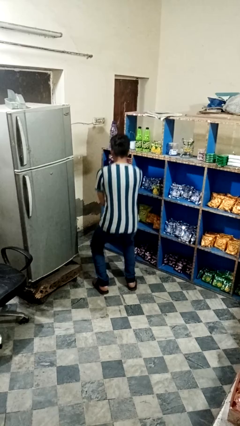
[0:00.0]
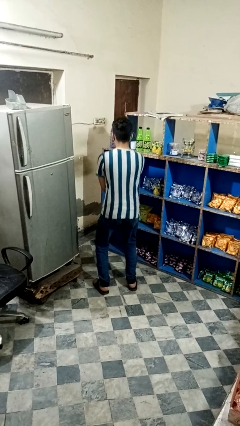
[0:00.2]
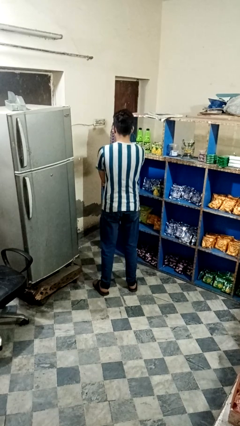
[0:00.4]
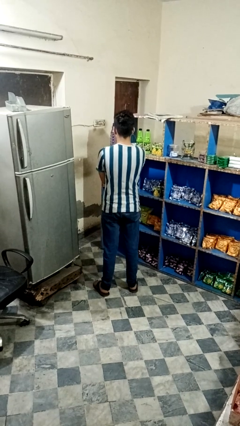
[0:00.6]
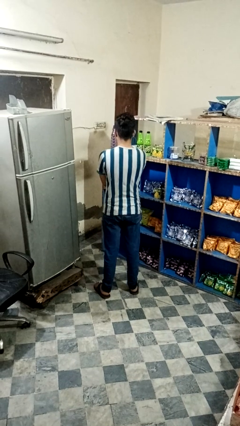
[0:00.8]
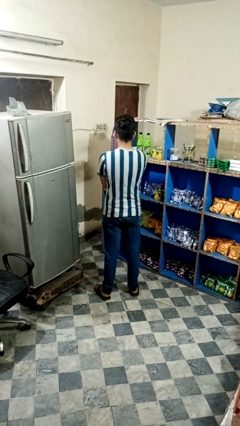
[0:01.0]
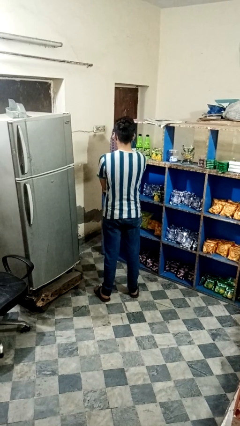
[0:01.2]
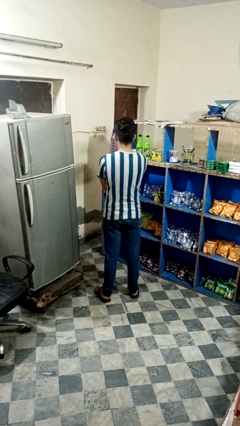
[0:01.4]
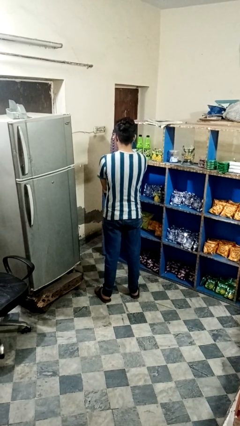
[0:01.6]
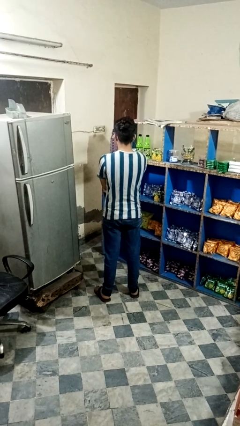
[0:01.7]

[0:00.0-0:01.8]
person stands up

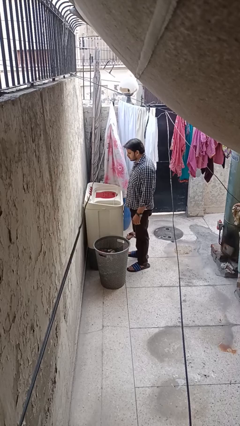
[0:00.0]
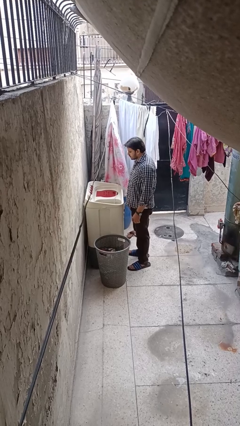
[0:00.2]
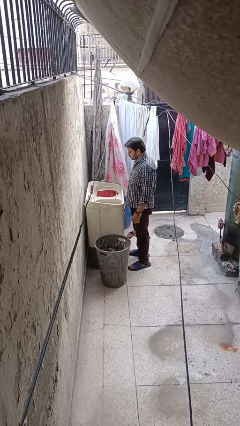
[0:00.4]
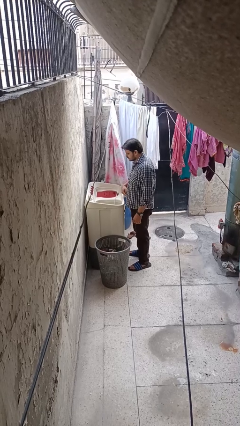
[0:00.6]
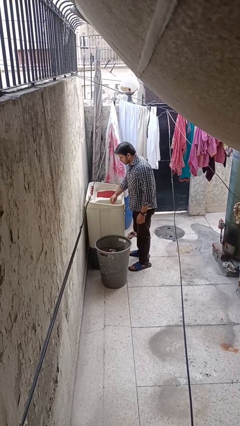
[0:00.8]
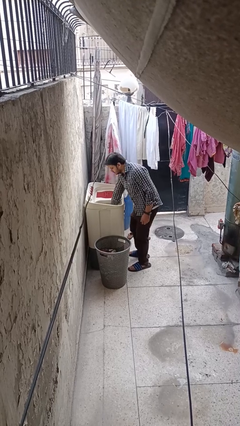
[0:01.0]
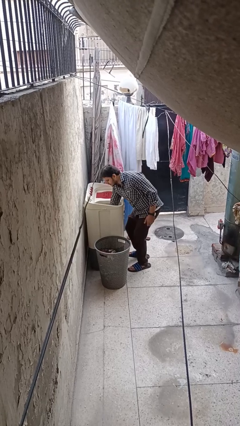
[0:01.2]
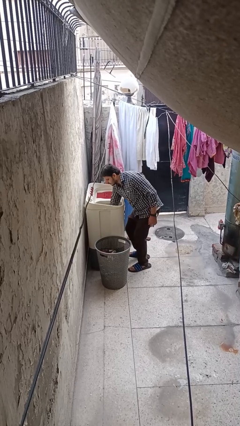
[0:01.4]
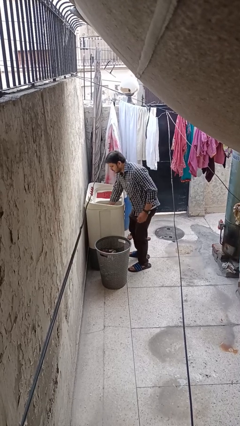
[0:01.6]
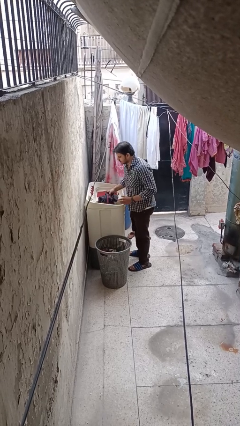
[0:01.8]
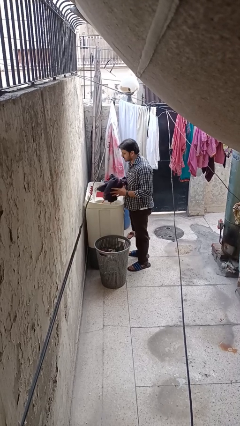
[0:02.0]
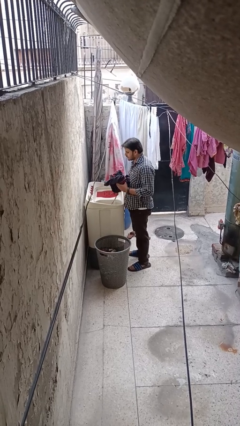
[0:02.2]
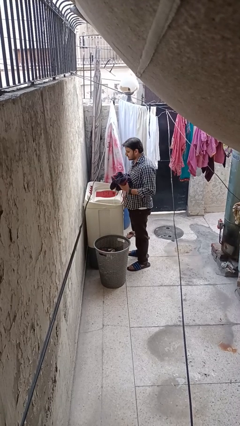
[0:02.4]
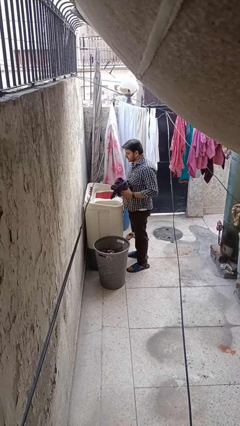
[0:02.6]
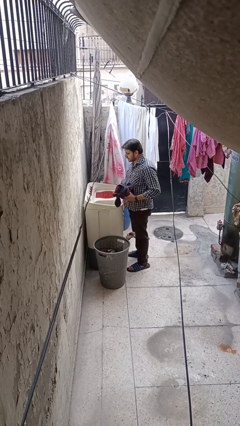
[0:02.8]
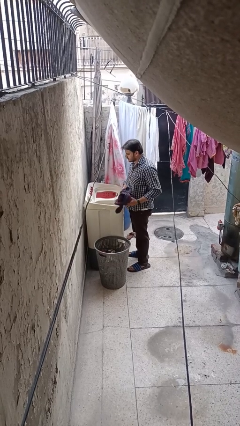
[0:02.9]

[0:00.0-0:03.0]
person loads clotheswasher

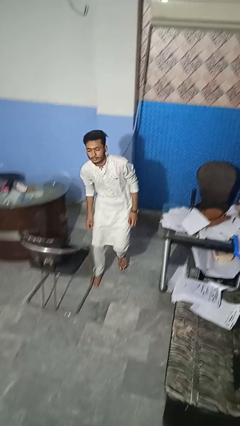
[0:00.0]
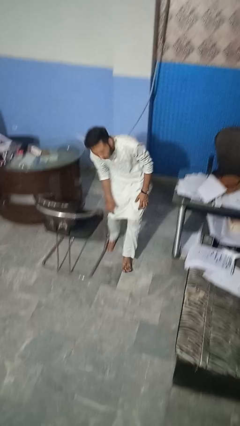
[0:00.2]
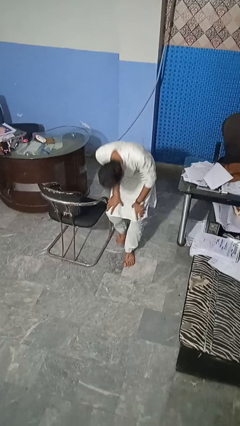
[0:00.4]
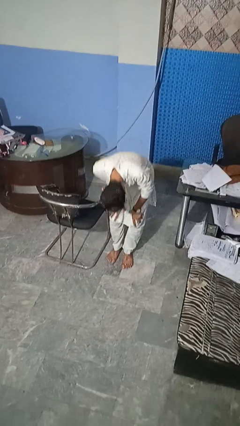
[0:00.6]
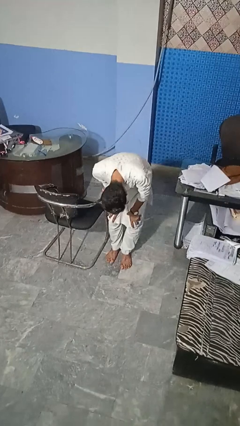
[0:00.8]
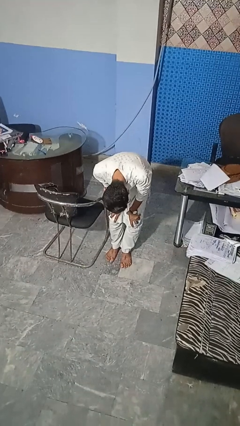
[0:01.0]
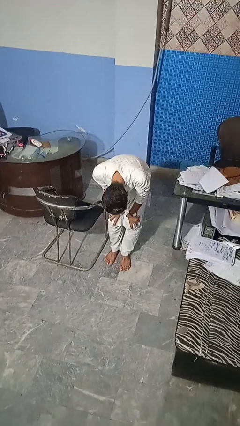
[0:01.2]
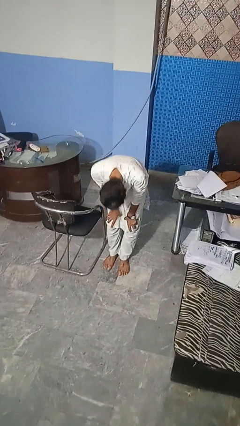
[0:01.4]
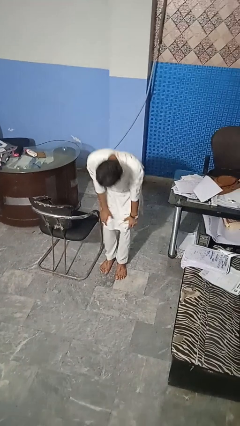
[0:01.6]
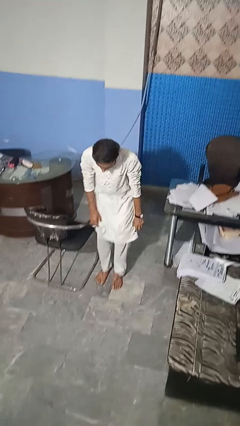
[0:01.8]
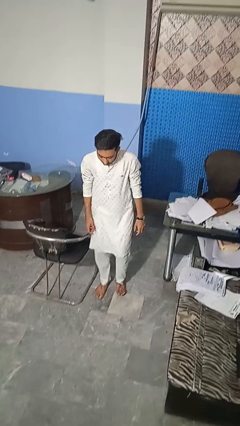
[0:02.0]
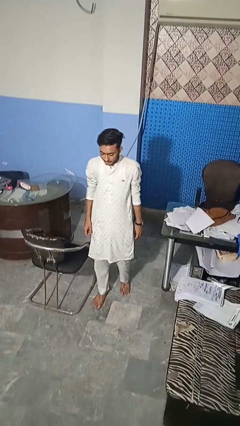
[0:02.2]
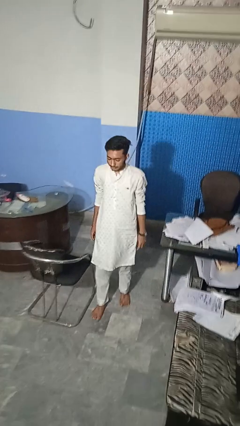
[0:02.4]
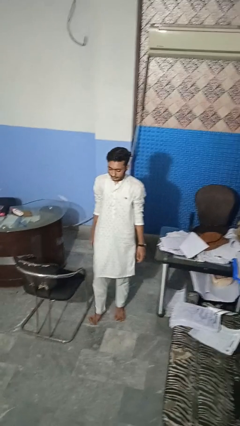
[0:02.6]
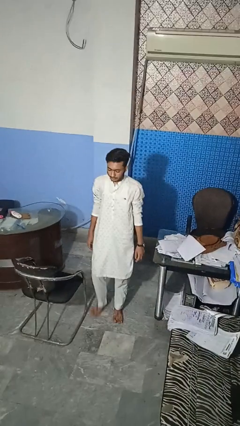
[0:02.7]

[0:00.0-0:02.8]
person stubs toe

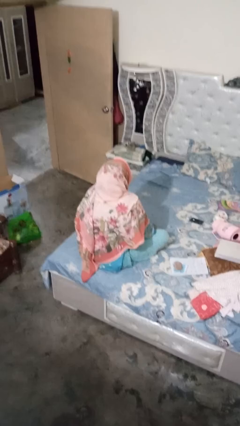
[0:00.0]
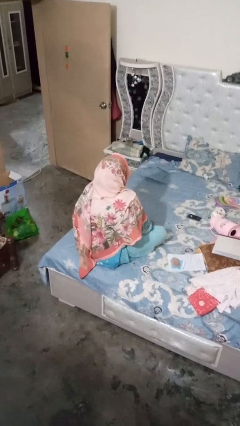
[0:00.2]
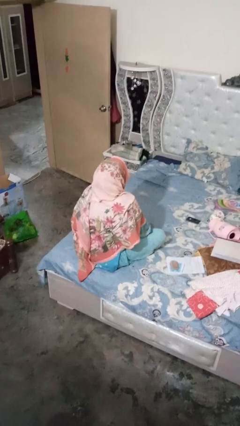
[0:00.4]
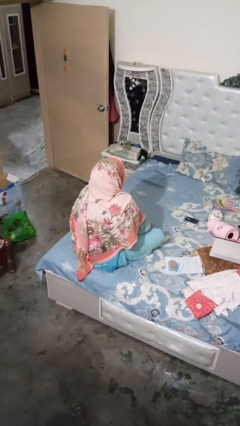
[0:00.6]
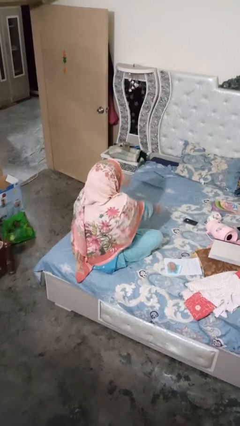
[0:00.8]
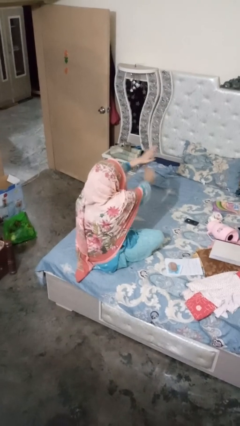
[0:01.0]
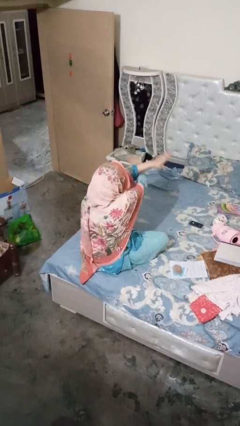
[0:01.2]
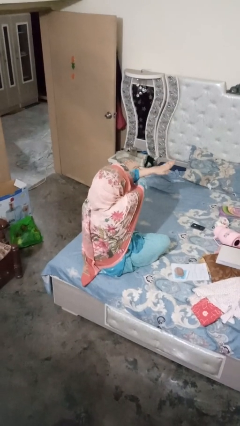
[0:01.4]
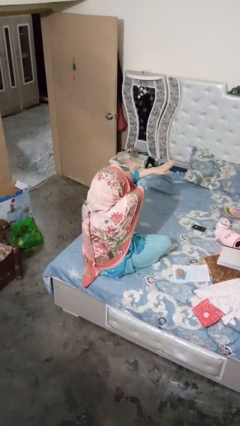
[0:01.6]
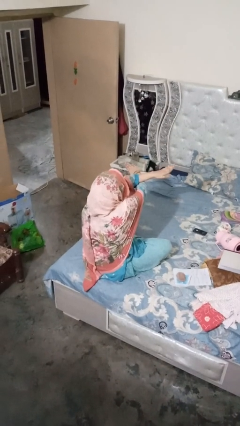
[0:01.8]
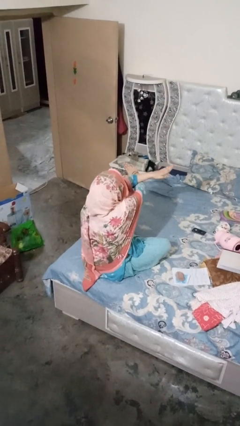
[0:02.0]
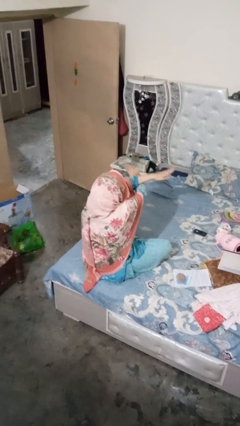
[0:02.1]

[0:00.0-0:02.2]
person gestures arms x

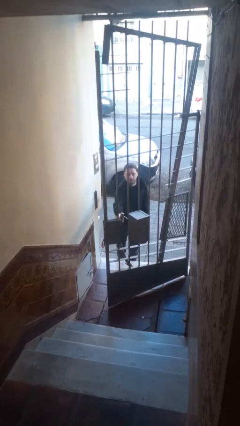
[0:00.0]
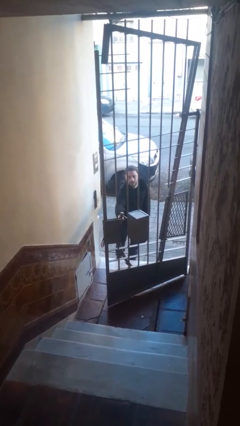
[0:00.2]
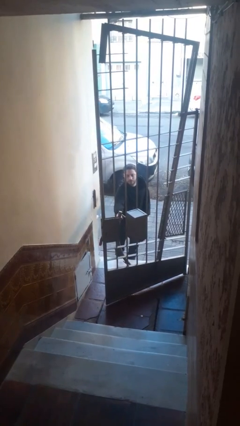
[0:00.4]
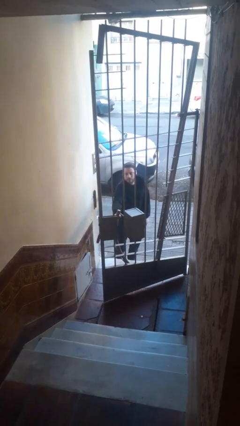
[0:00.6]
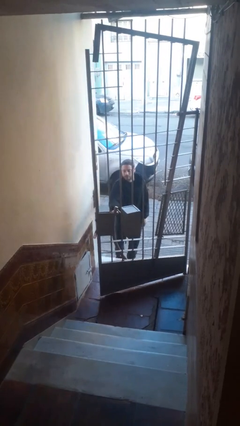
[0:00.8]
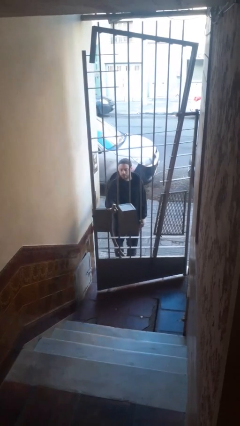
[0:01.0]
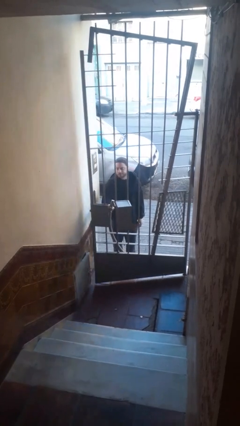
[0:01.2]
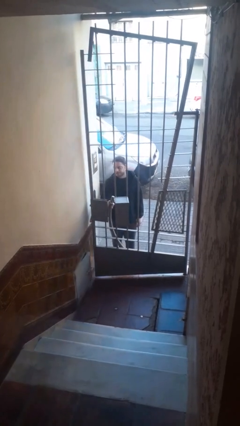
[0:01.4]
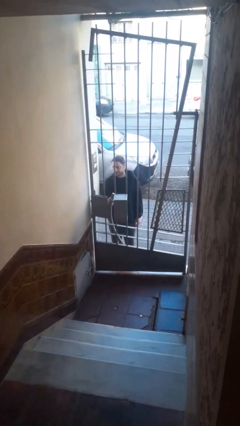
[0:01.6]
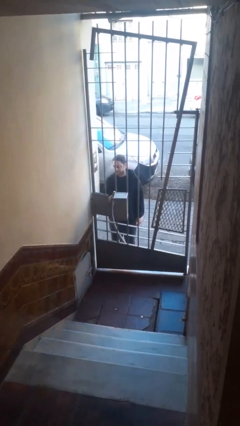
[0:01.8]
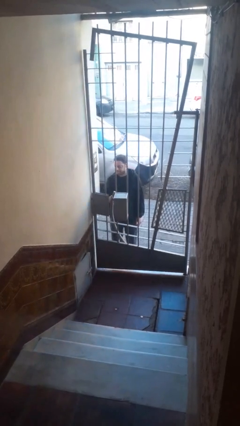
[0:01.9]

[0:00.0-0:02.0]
person closes gate

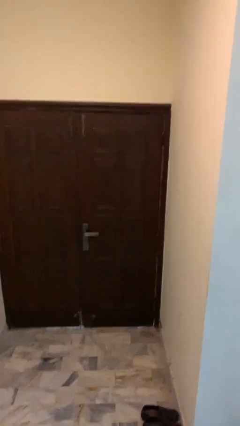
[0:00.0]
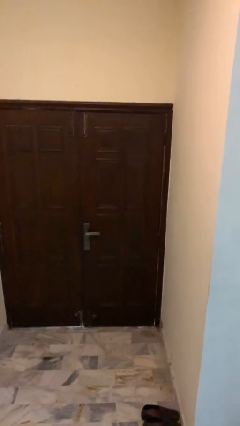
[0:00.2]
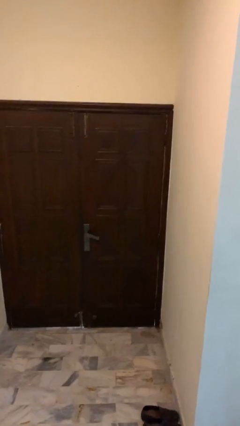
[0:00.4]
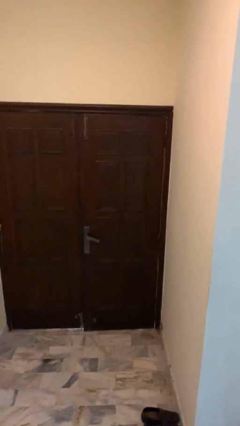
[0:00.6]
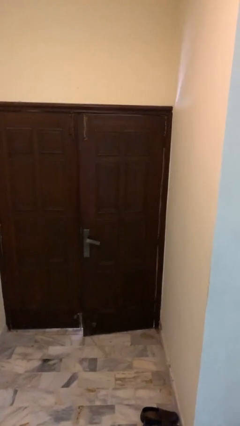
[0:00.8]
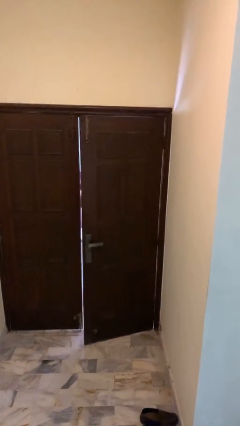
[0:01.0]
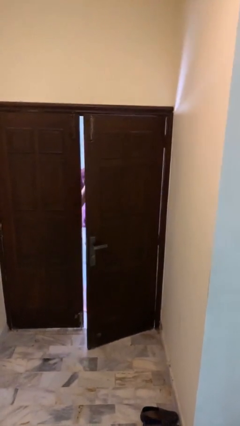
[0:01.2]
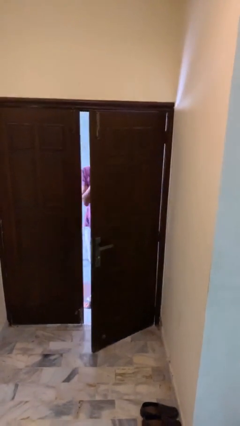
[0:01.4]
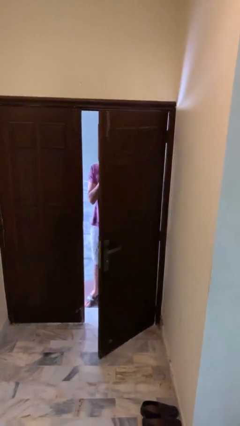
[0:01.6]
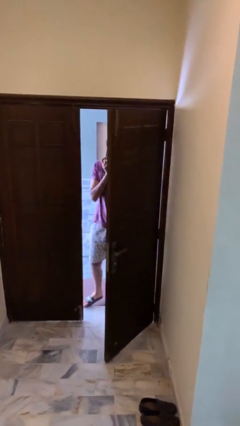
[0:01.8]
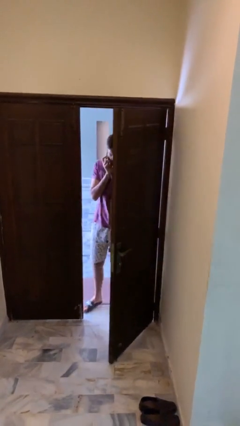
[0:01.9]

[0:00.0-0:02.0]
person opens facility door

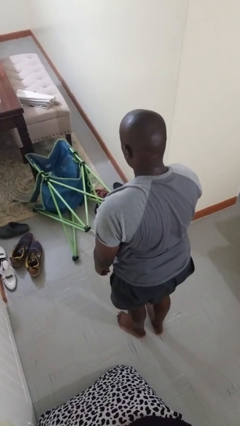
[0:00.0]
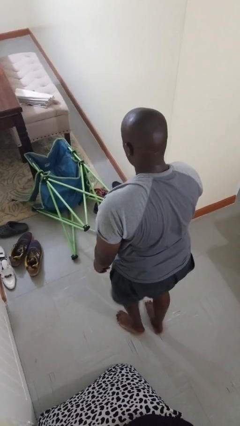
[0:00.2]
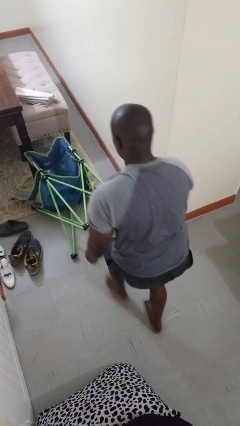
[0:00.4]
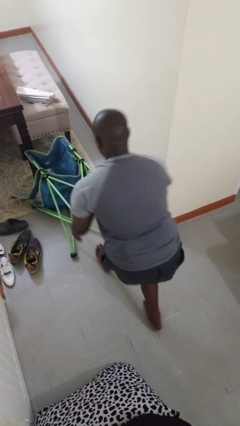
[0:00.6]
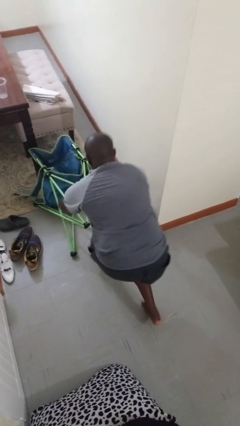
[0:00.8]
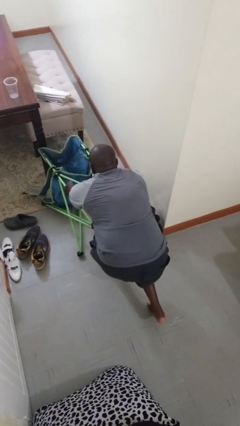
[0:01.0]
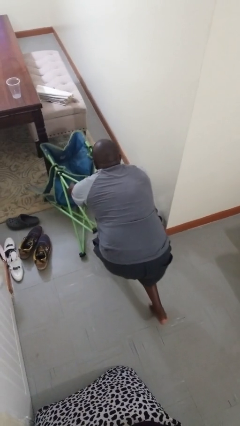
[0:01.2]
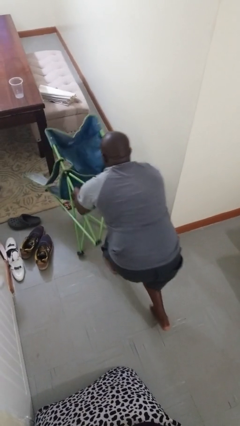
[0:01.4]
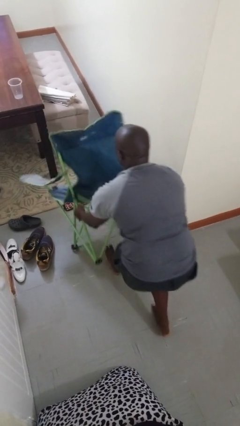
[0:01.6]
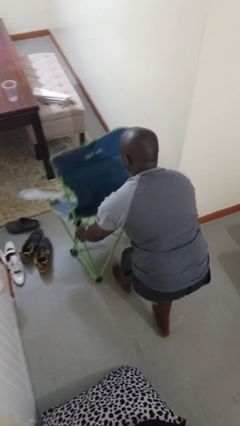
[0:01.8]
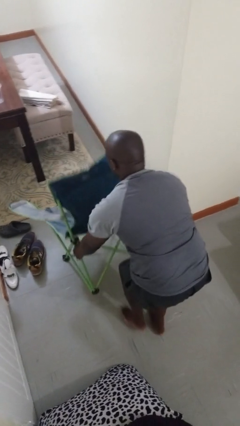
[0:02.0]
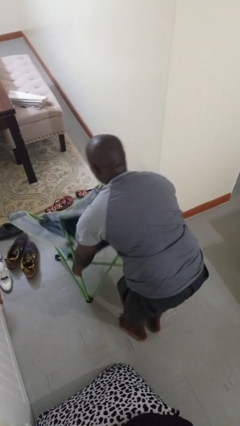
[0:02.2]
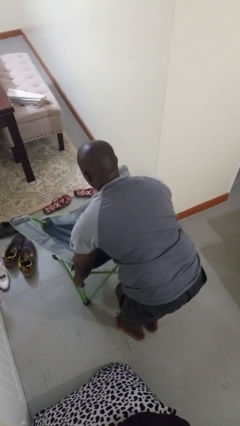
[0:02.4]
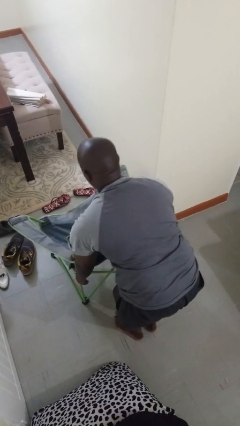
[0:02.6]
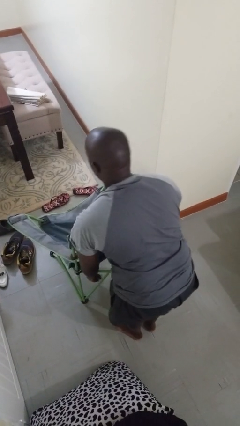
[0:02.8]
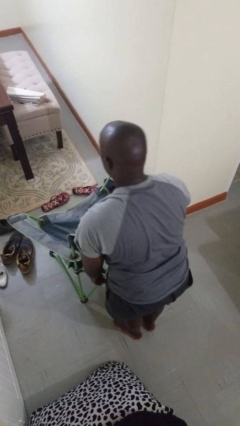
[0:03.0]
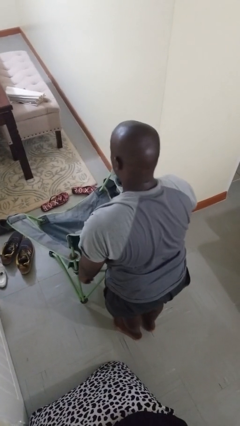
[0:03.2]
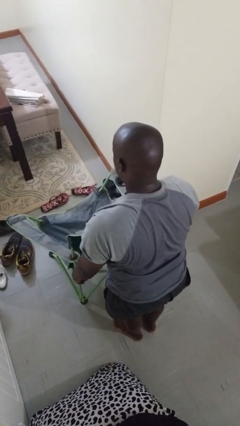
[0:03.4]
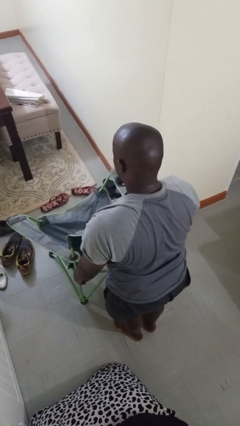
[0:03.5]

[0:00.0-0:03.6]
person sets upright furniture
